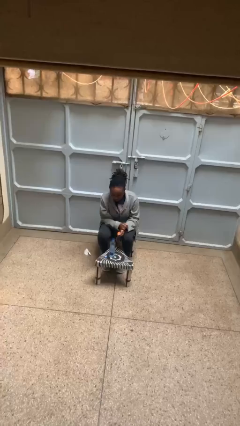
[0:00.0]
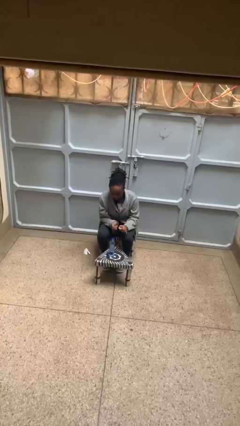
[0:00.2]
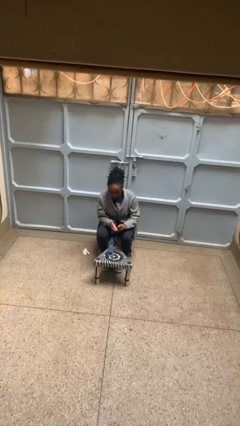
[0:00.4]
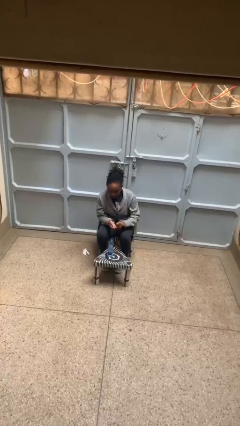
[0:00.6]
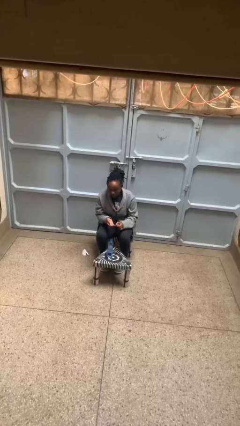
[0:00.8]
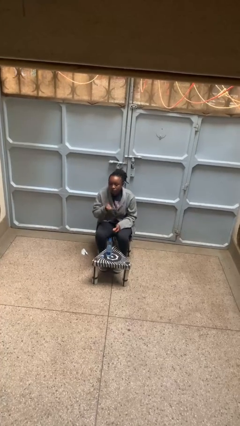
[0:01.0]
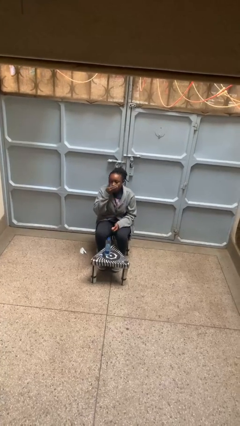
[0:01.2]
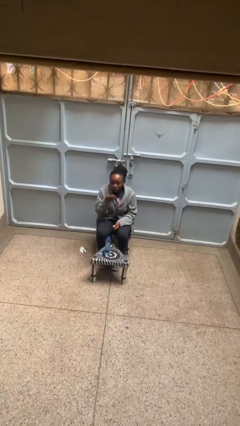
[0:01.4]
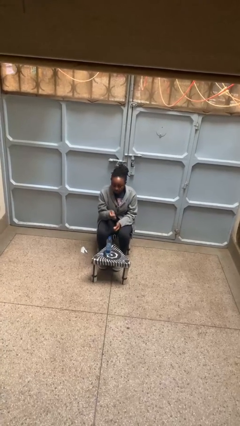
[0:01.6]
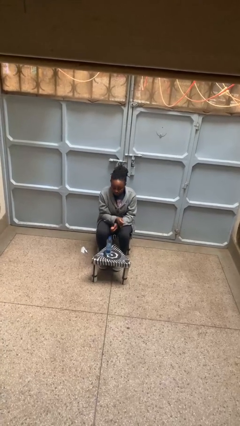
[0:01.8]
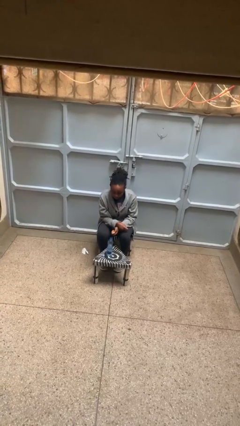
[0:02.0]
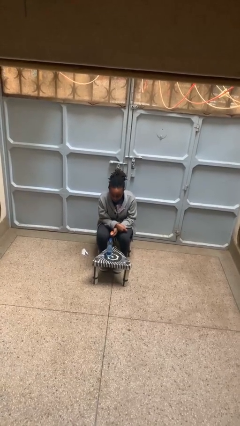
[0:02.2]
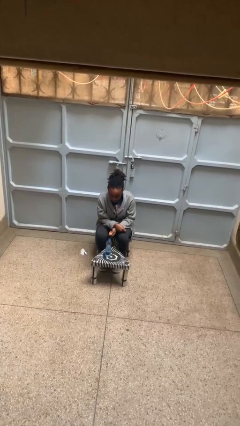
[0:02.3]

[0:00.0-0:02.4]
person takes medicine pills

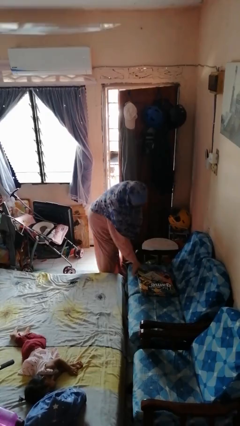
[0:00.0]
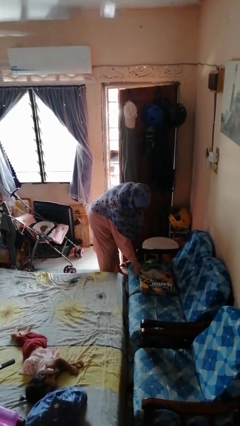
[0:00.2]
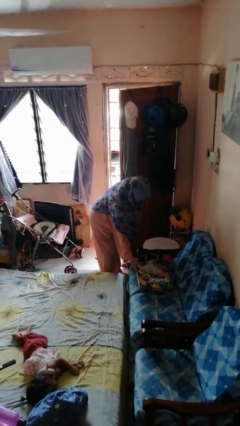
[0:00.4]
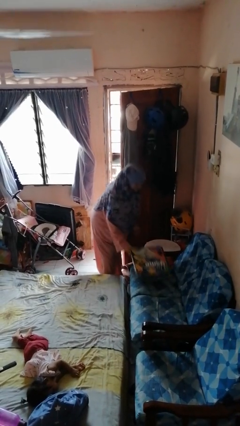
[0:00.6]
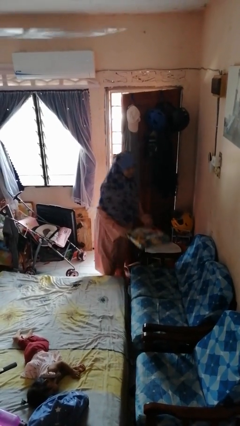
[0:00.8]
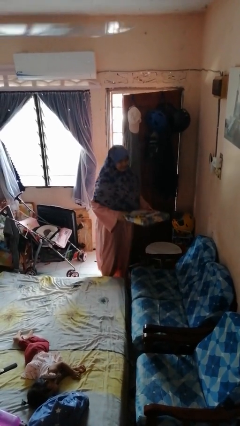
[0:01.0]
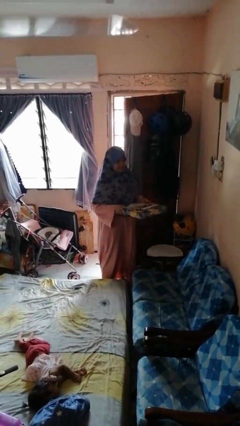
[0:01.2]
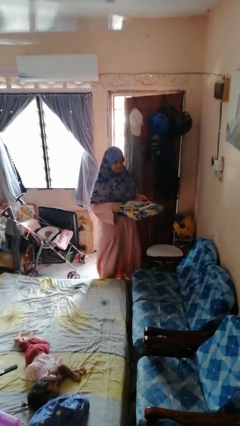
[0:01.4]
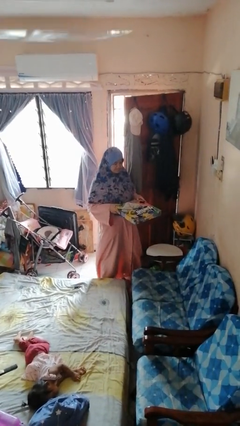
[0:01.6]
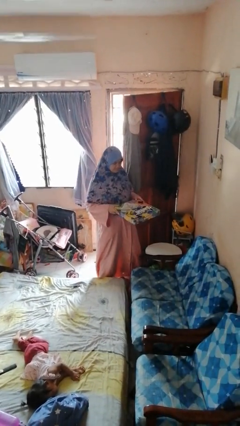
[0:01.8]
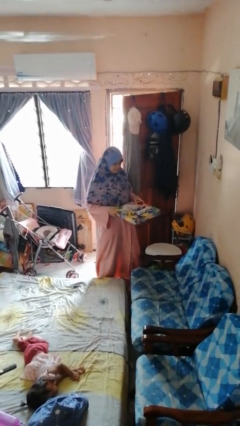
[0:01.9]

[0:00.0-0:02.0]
person puts down object on couch

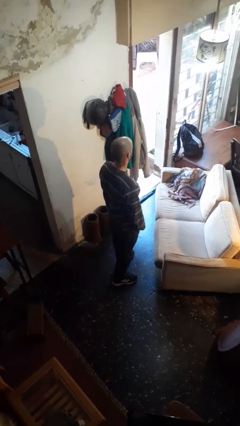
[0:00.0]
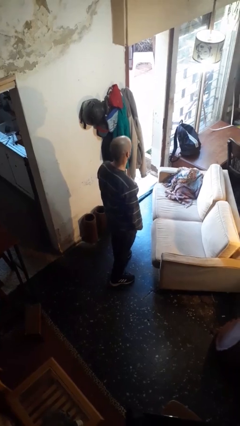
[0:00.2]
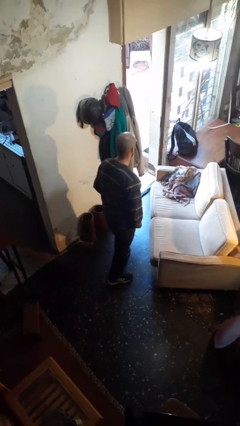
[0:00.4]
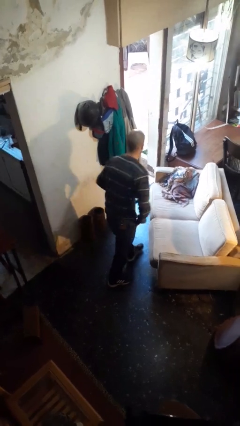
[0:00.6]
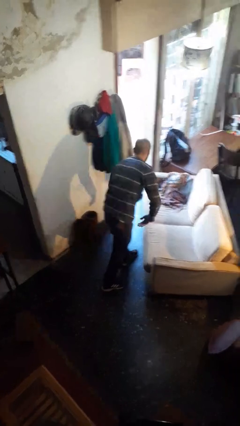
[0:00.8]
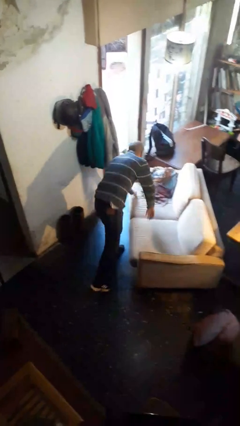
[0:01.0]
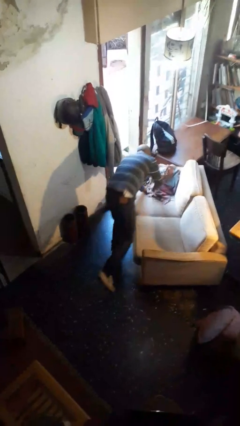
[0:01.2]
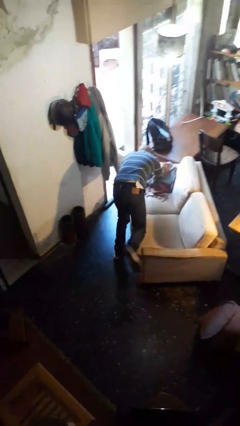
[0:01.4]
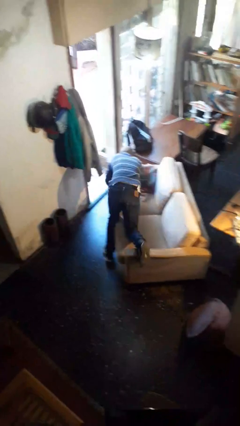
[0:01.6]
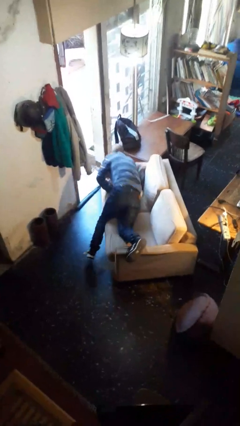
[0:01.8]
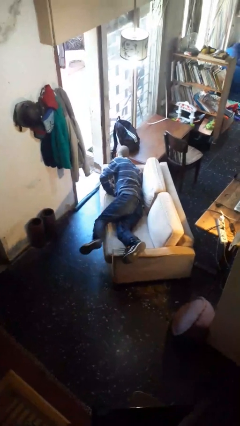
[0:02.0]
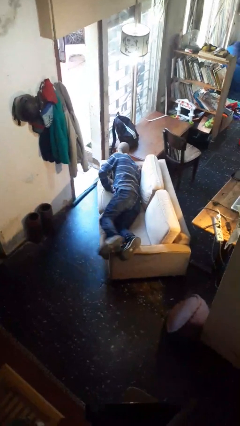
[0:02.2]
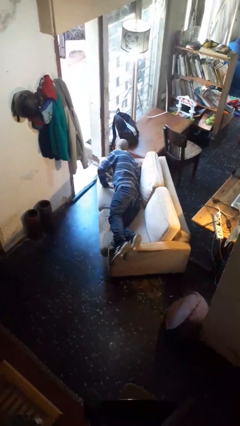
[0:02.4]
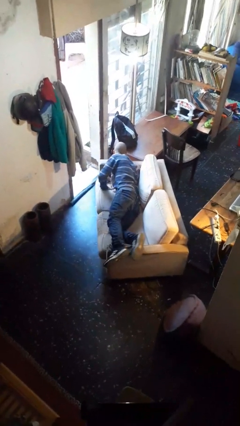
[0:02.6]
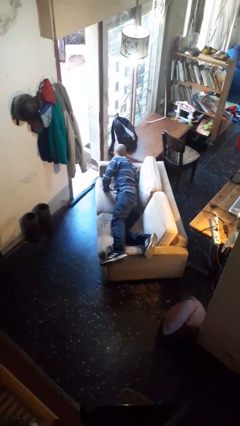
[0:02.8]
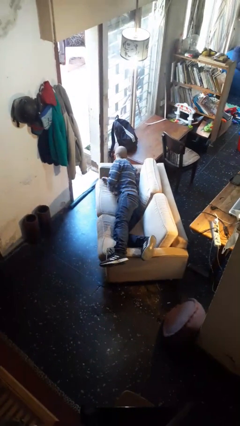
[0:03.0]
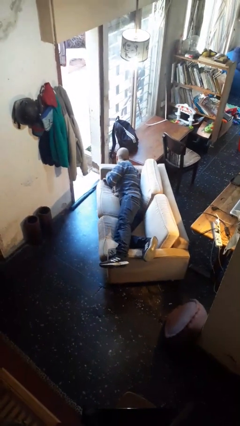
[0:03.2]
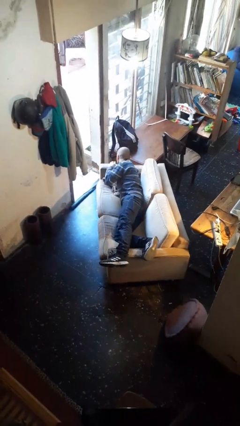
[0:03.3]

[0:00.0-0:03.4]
person lies down on couch

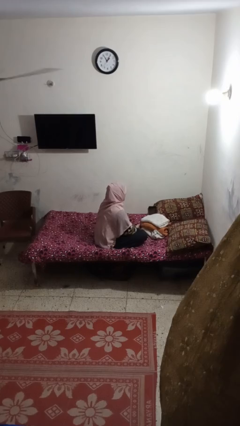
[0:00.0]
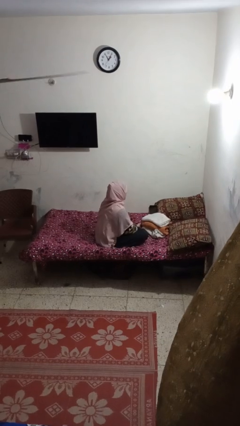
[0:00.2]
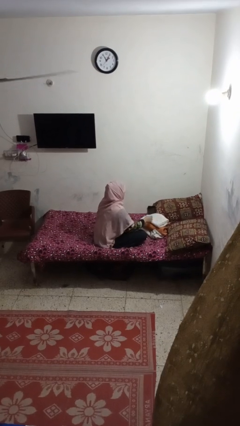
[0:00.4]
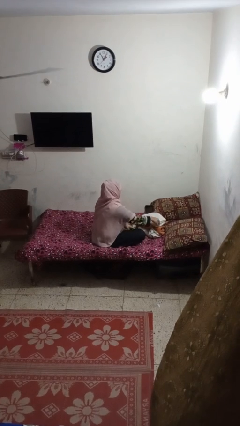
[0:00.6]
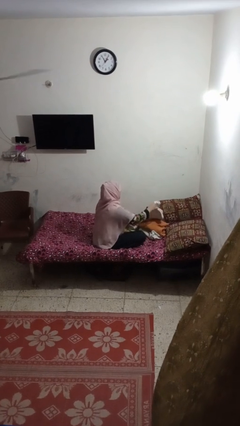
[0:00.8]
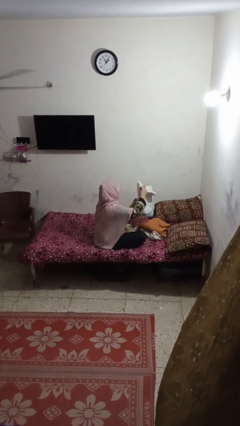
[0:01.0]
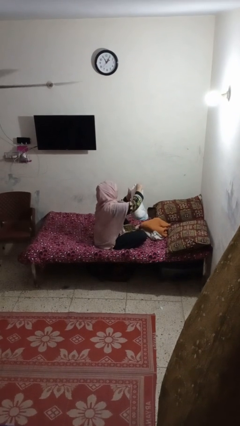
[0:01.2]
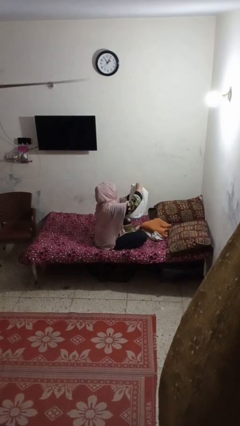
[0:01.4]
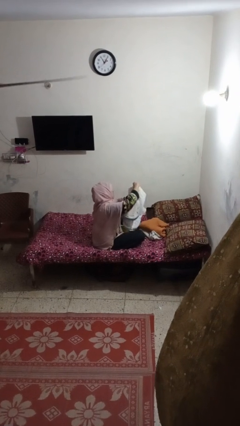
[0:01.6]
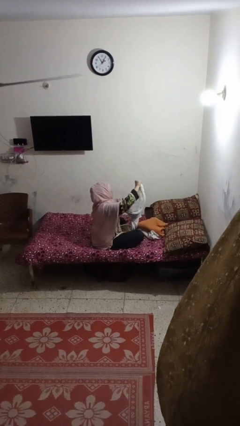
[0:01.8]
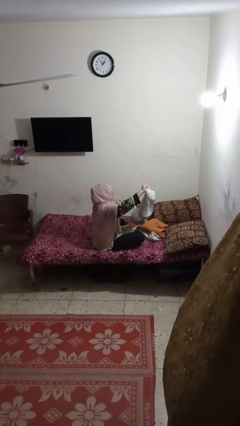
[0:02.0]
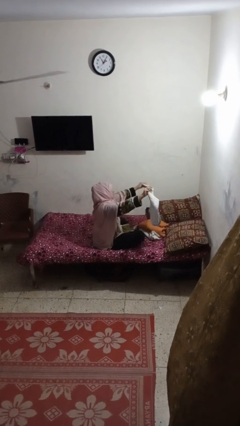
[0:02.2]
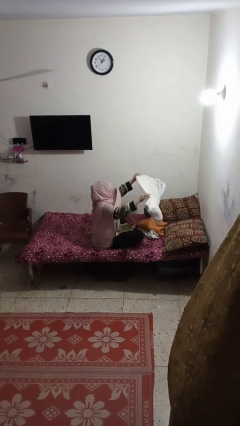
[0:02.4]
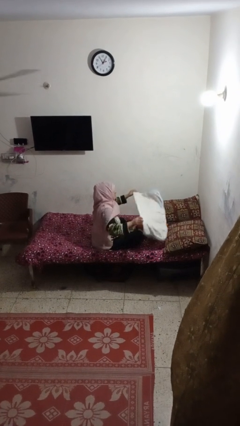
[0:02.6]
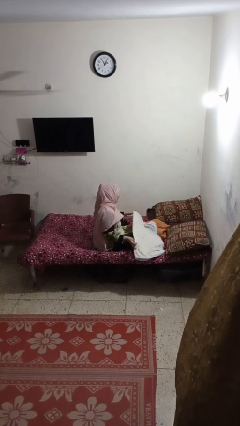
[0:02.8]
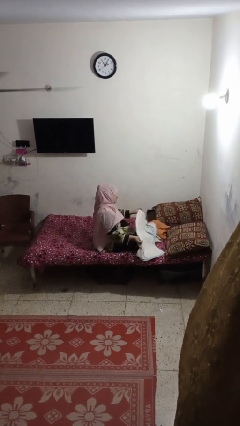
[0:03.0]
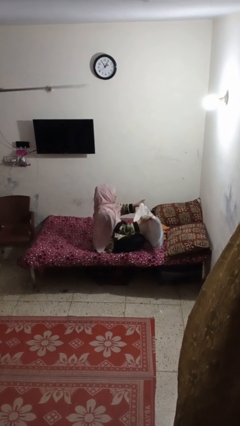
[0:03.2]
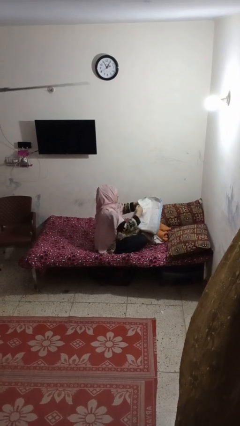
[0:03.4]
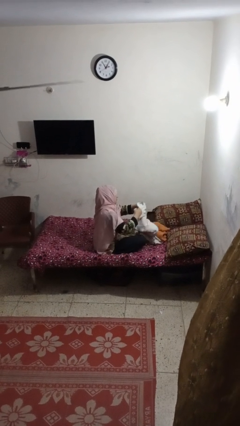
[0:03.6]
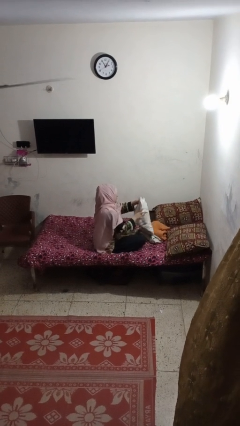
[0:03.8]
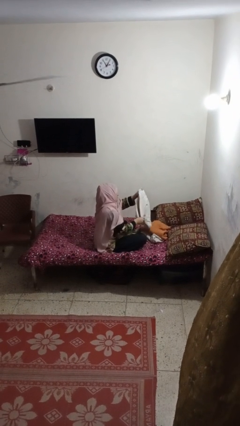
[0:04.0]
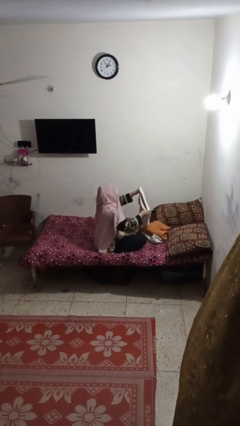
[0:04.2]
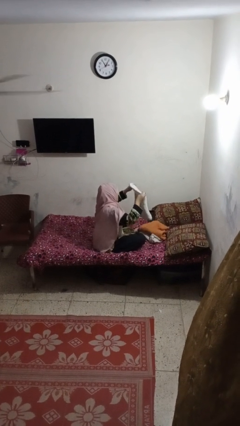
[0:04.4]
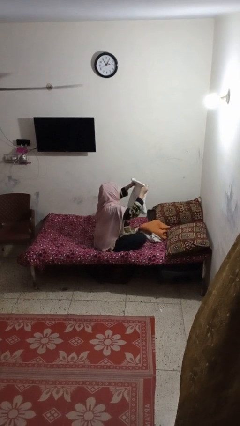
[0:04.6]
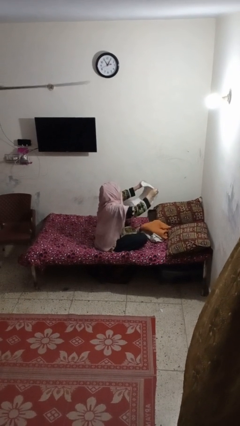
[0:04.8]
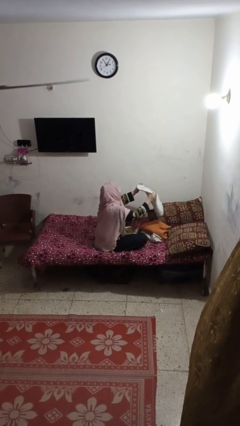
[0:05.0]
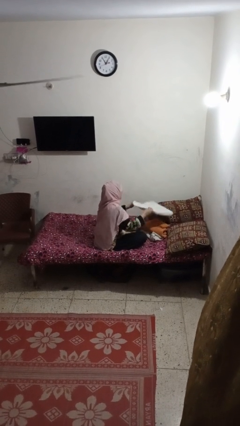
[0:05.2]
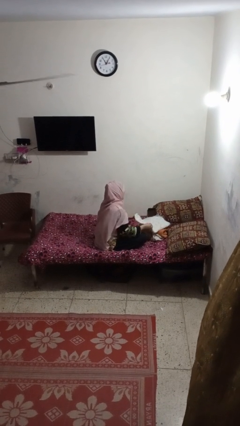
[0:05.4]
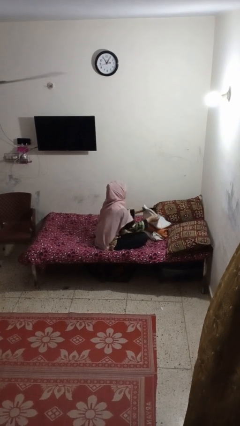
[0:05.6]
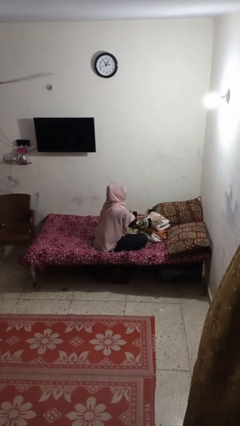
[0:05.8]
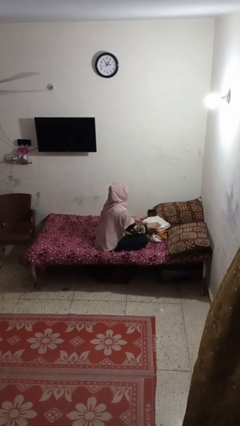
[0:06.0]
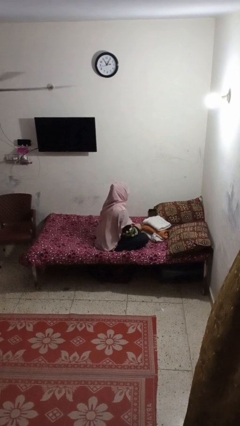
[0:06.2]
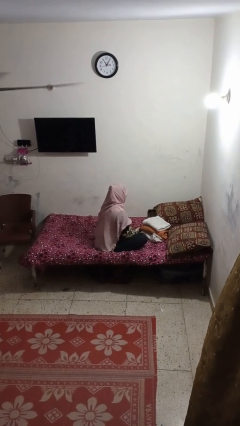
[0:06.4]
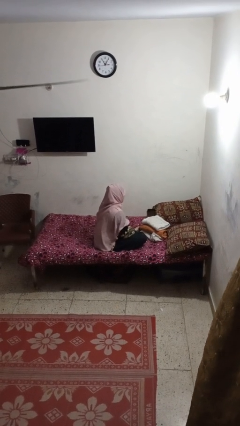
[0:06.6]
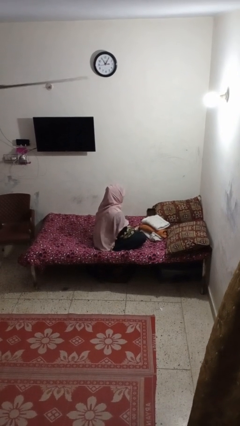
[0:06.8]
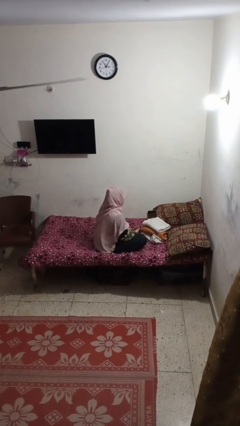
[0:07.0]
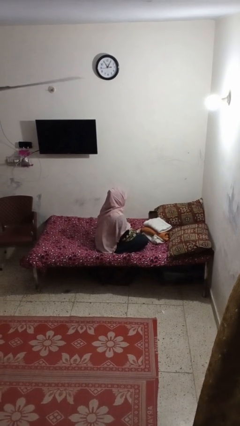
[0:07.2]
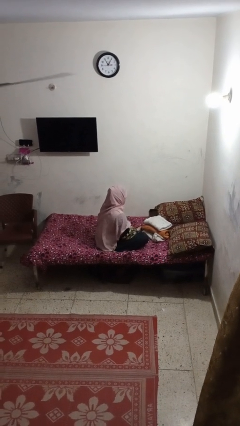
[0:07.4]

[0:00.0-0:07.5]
person folds towel

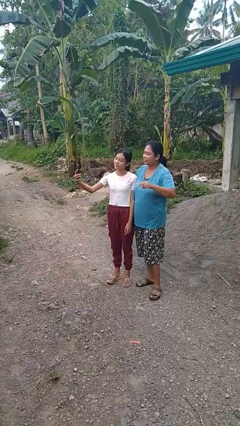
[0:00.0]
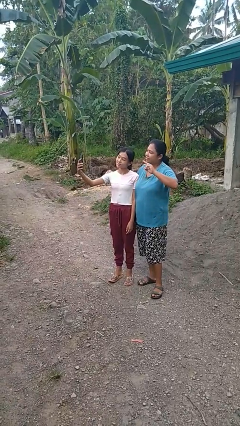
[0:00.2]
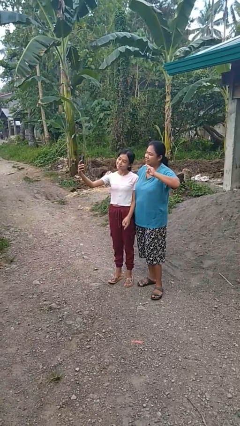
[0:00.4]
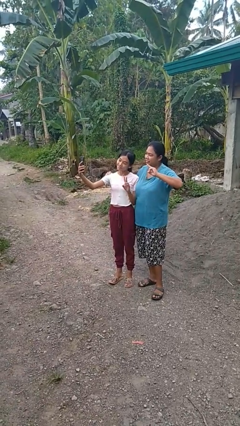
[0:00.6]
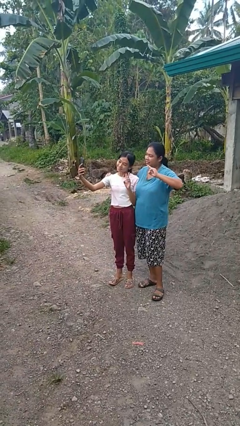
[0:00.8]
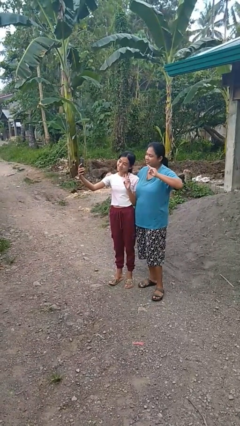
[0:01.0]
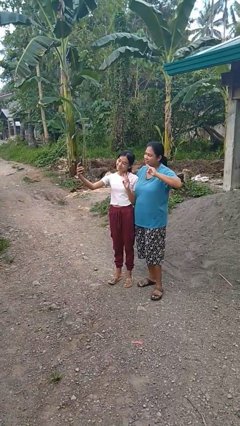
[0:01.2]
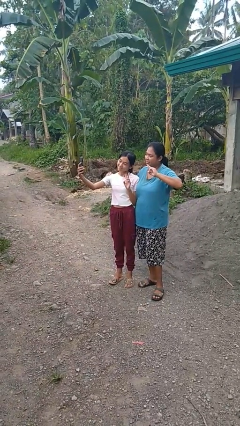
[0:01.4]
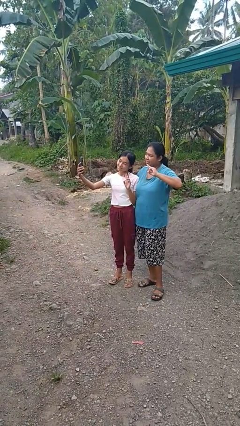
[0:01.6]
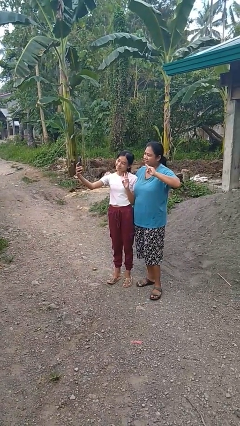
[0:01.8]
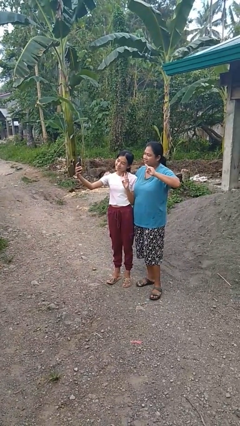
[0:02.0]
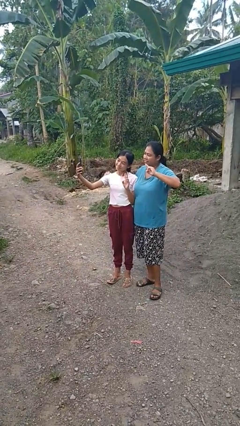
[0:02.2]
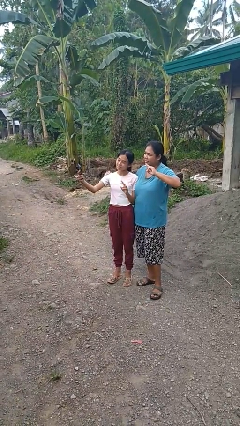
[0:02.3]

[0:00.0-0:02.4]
person takes selfie with person

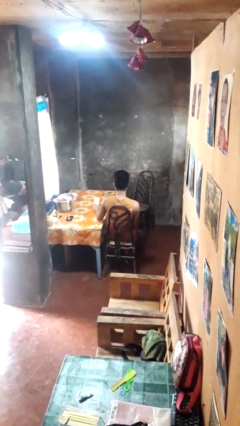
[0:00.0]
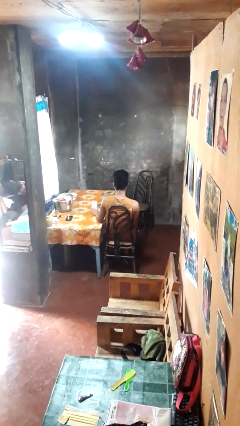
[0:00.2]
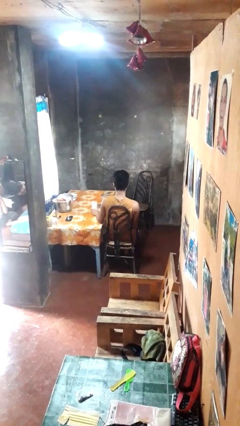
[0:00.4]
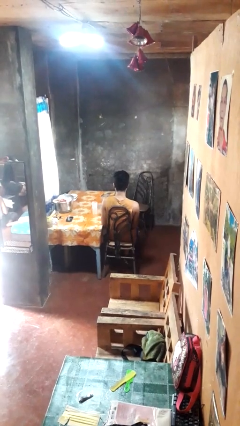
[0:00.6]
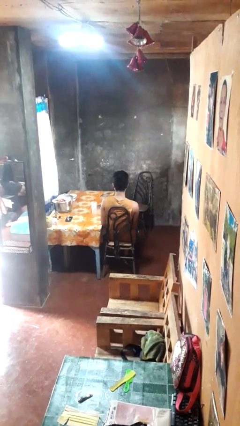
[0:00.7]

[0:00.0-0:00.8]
person sets upright glass
